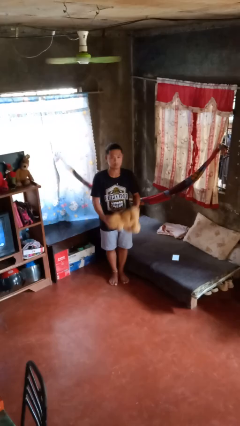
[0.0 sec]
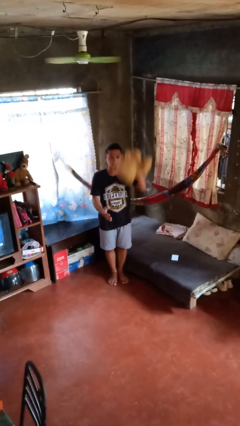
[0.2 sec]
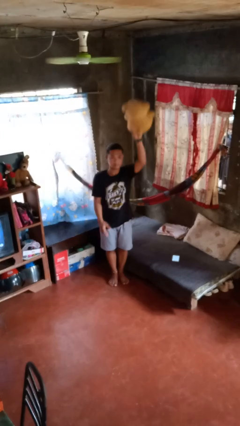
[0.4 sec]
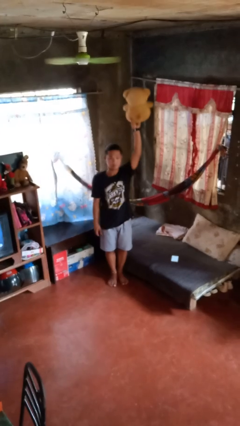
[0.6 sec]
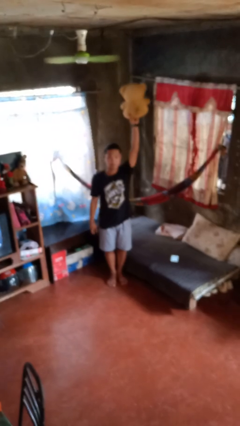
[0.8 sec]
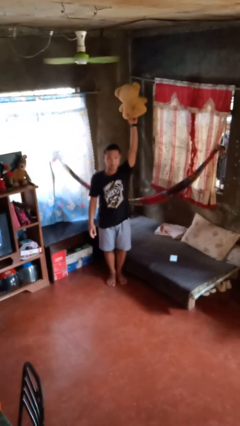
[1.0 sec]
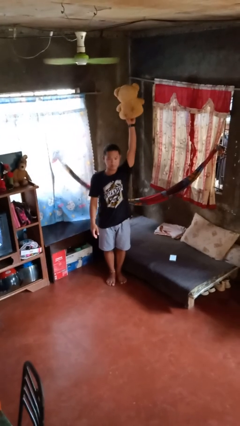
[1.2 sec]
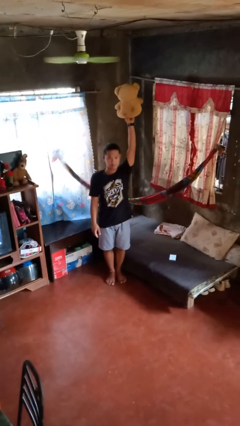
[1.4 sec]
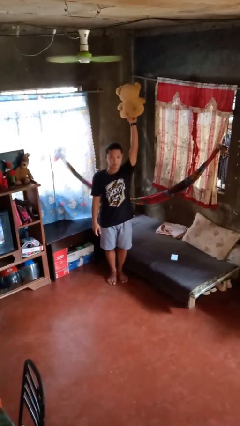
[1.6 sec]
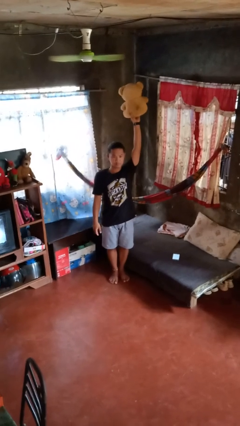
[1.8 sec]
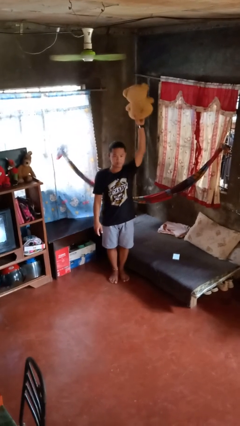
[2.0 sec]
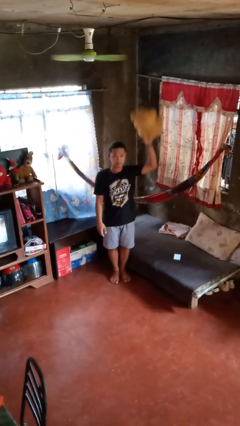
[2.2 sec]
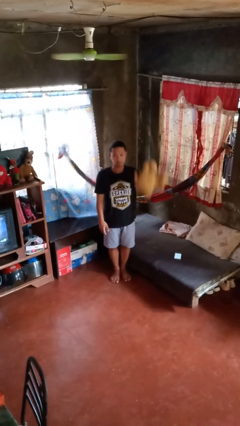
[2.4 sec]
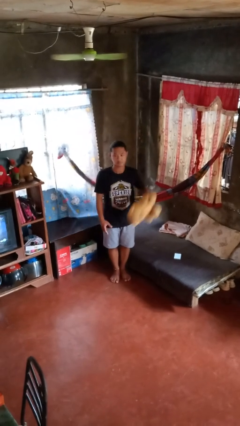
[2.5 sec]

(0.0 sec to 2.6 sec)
person holds object above head

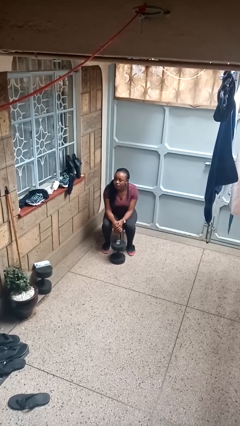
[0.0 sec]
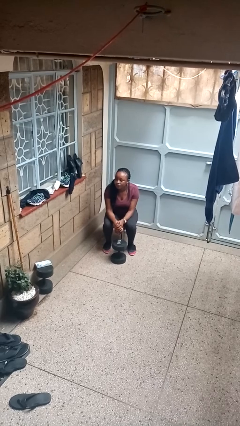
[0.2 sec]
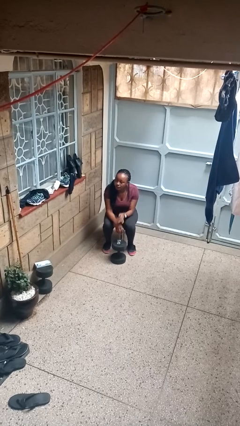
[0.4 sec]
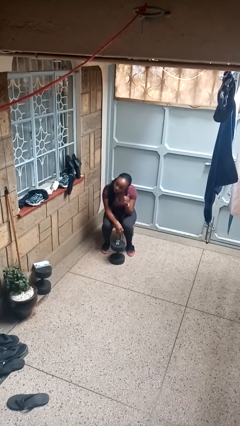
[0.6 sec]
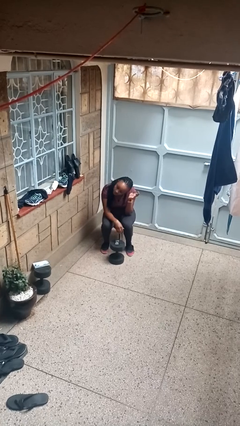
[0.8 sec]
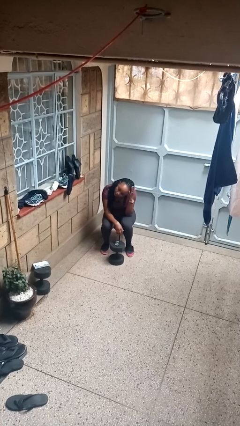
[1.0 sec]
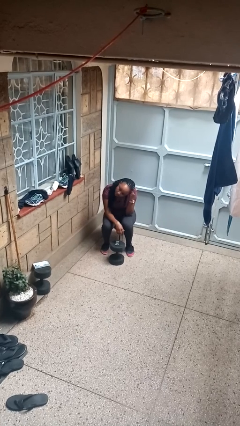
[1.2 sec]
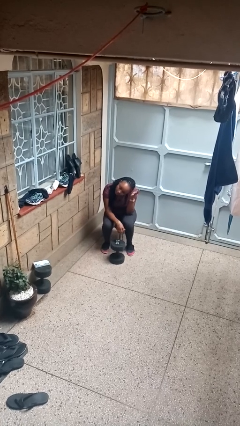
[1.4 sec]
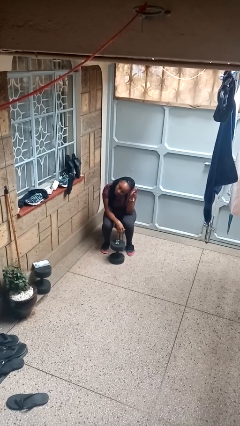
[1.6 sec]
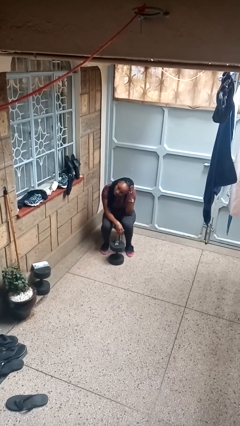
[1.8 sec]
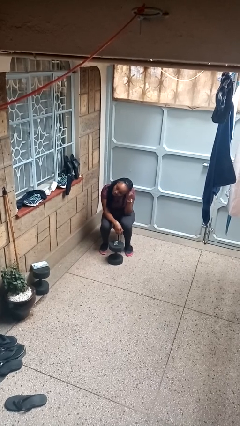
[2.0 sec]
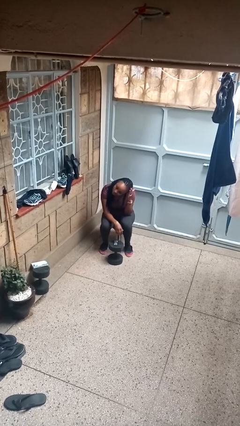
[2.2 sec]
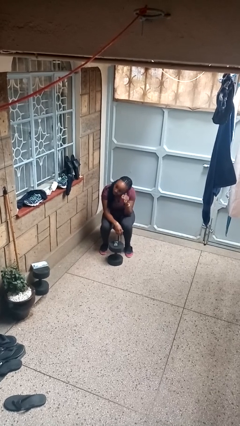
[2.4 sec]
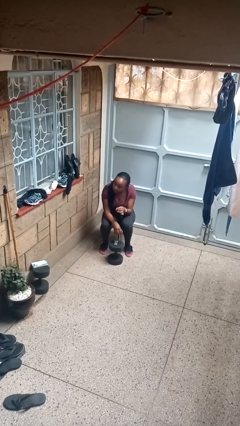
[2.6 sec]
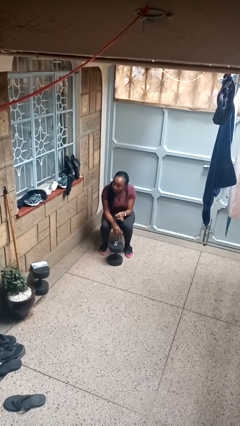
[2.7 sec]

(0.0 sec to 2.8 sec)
person pats head

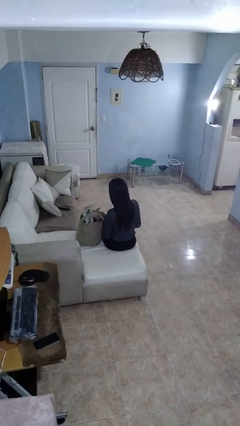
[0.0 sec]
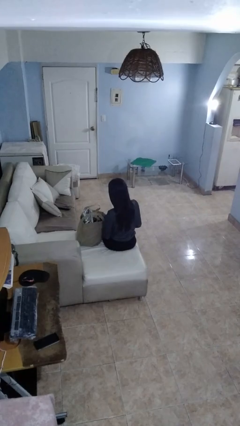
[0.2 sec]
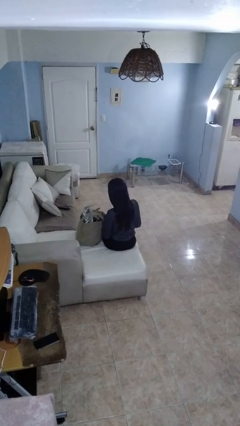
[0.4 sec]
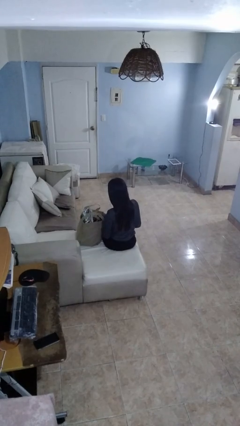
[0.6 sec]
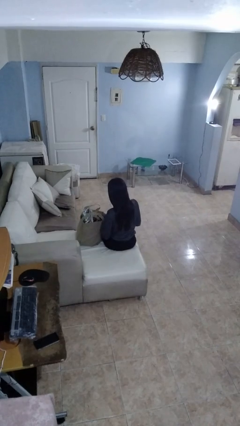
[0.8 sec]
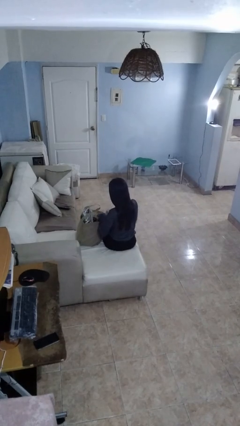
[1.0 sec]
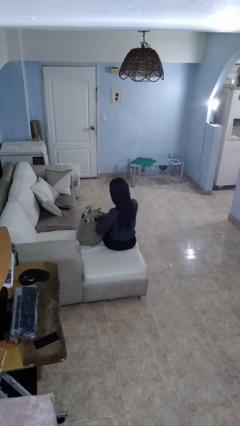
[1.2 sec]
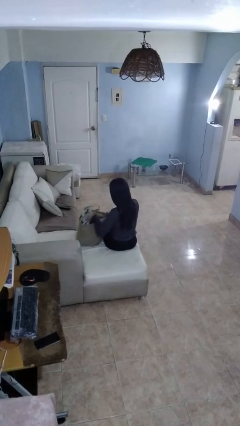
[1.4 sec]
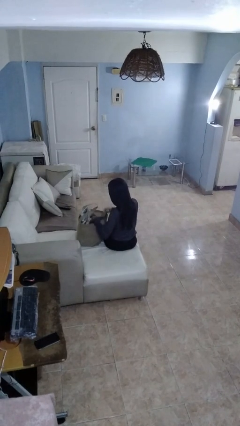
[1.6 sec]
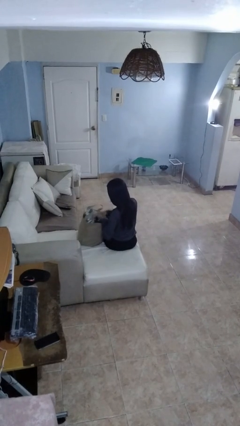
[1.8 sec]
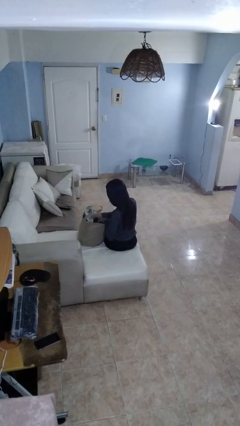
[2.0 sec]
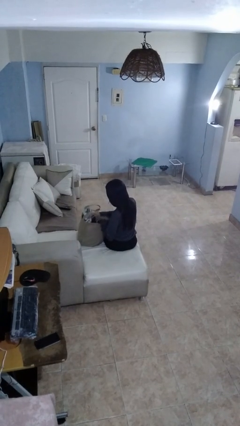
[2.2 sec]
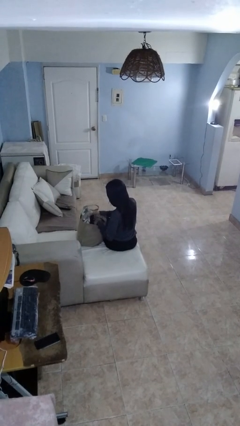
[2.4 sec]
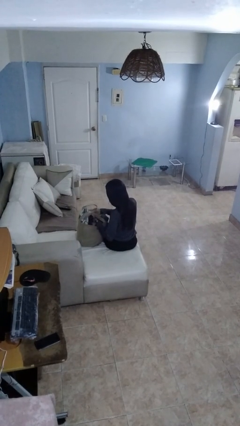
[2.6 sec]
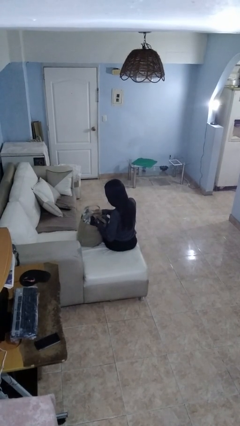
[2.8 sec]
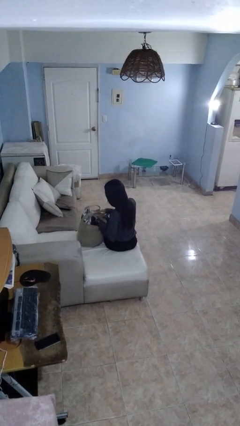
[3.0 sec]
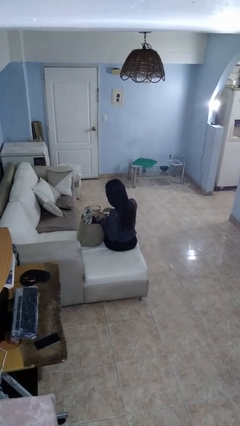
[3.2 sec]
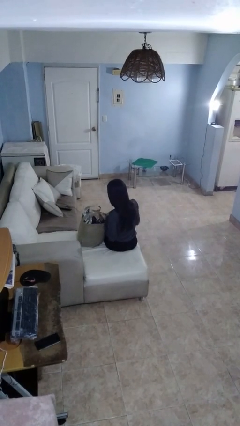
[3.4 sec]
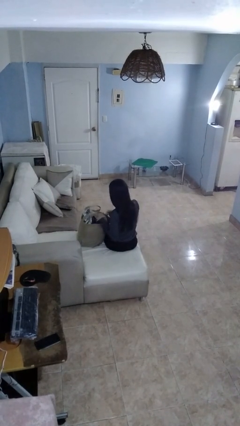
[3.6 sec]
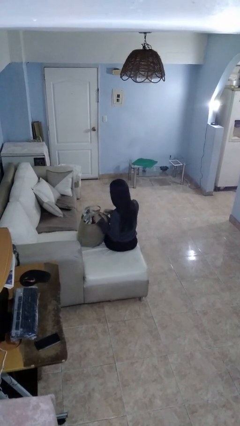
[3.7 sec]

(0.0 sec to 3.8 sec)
person searches in bag

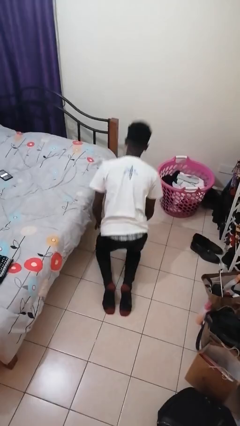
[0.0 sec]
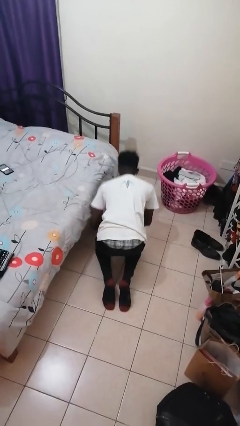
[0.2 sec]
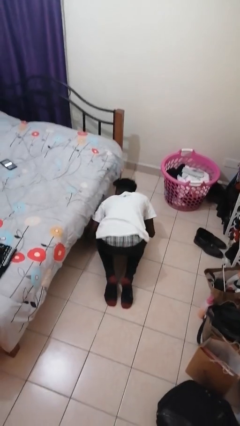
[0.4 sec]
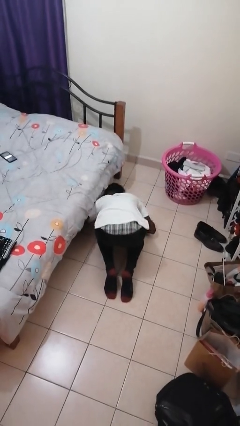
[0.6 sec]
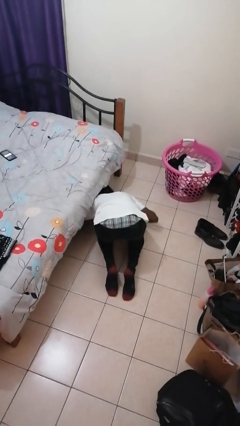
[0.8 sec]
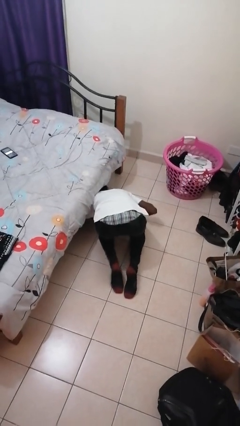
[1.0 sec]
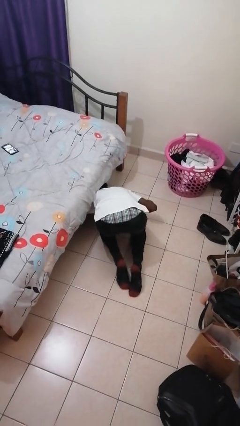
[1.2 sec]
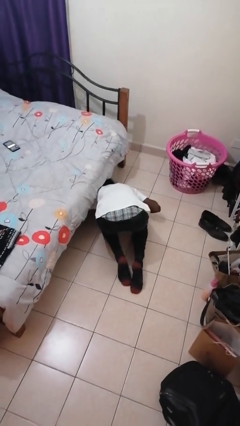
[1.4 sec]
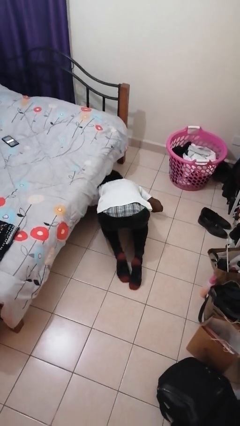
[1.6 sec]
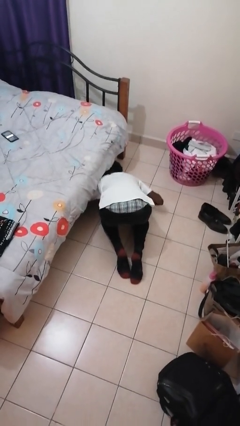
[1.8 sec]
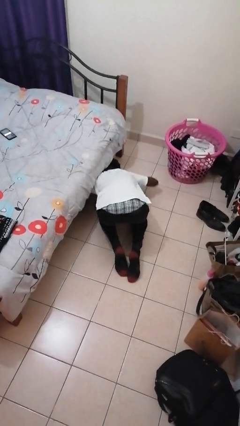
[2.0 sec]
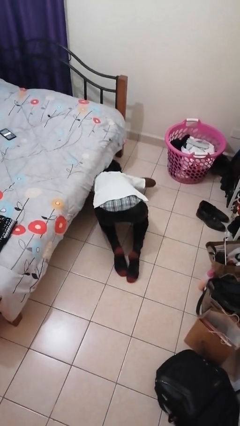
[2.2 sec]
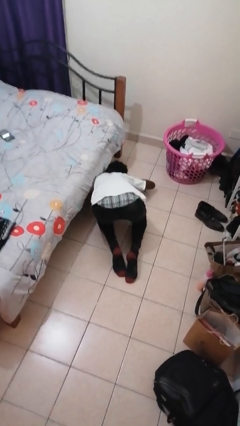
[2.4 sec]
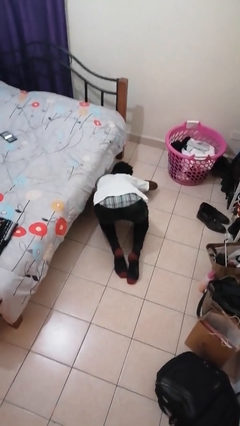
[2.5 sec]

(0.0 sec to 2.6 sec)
person searches under bed

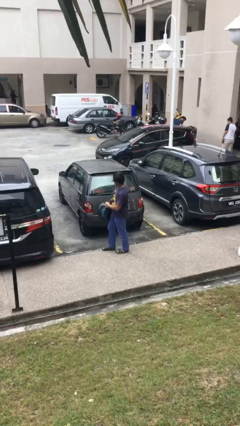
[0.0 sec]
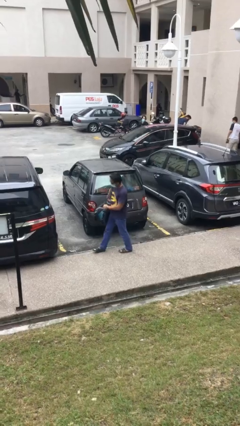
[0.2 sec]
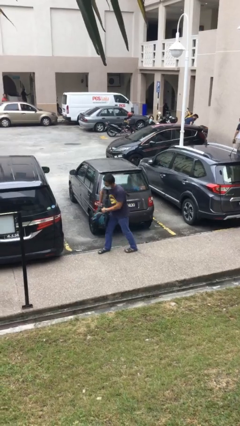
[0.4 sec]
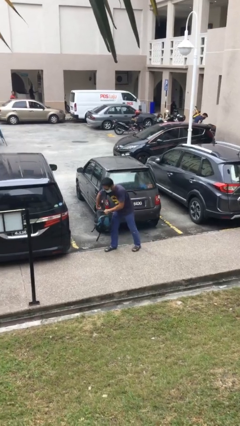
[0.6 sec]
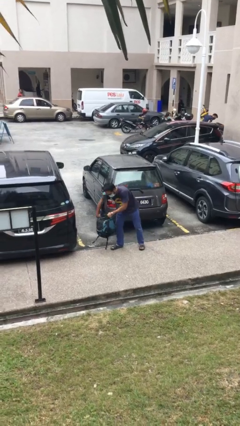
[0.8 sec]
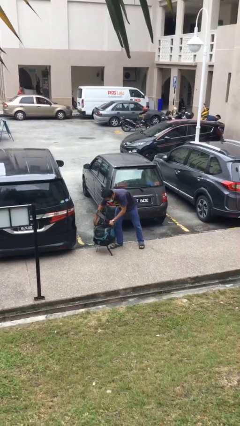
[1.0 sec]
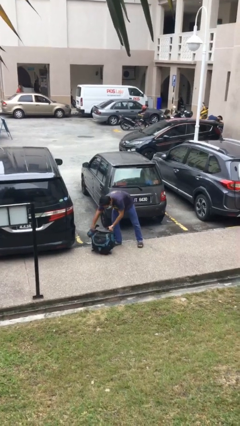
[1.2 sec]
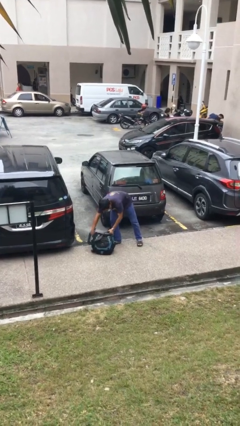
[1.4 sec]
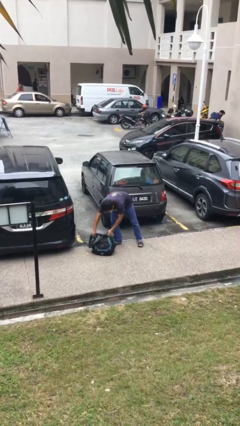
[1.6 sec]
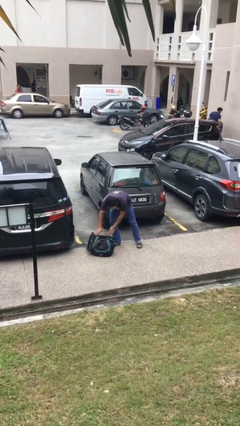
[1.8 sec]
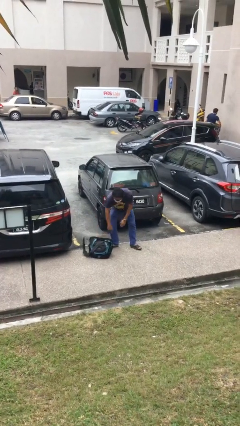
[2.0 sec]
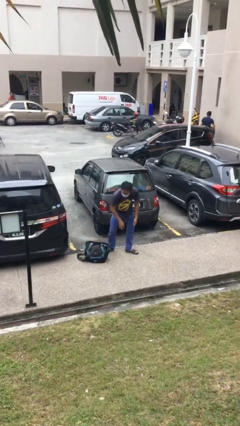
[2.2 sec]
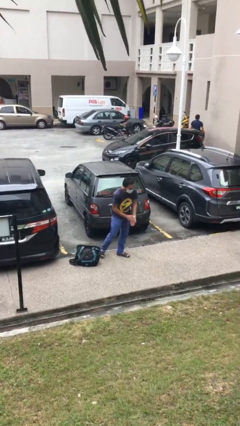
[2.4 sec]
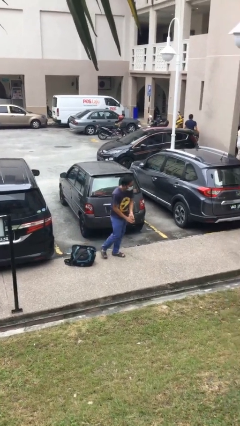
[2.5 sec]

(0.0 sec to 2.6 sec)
person puts down object on floor

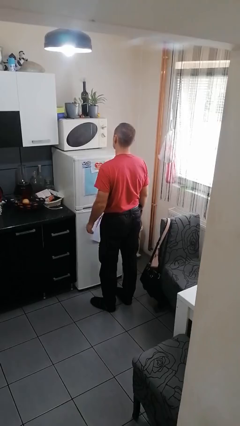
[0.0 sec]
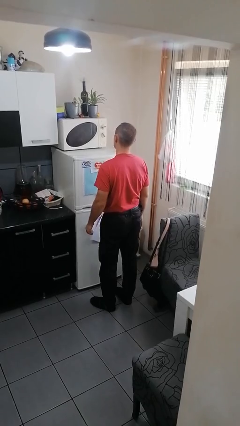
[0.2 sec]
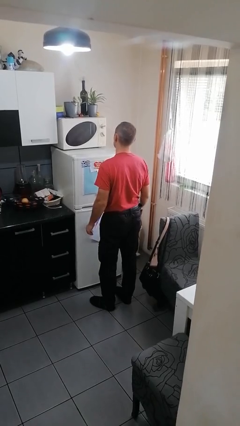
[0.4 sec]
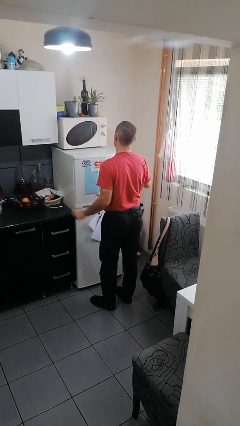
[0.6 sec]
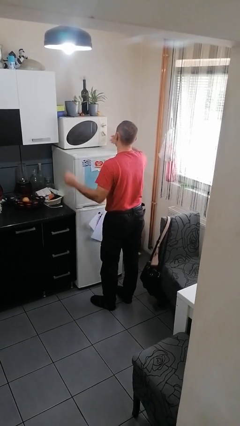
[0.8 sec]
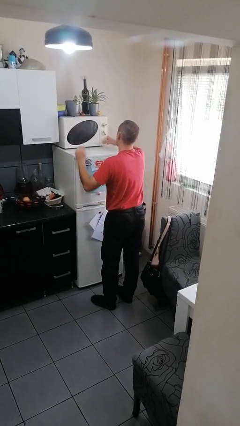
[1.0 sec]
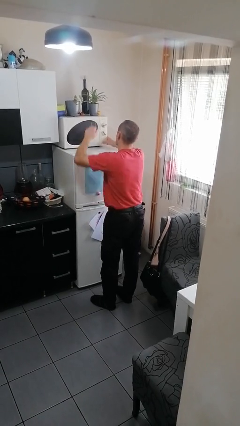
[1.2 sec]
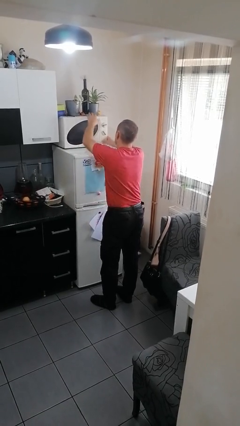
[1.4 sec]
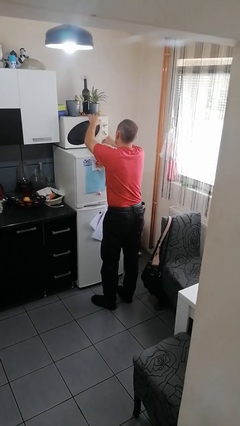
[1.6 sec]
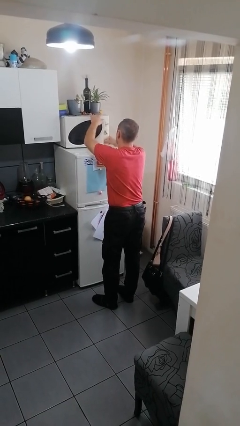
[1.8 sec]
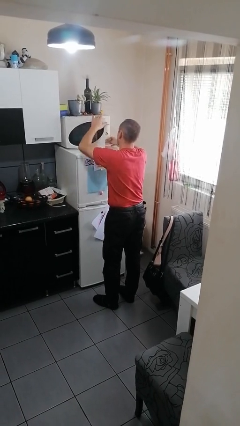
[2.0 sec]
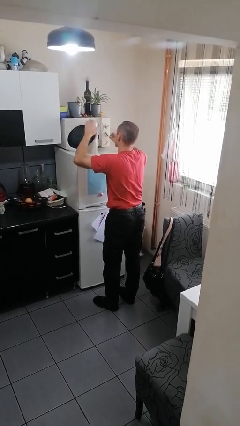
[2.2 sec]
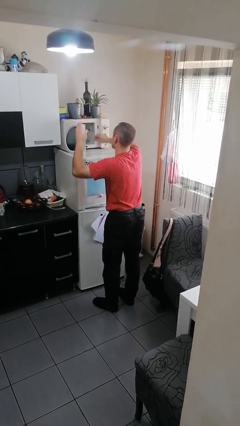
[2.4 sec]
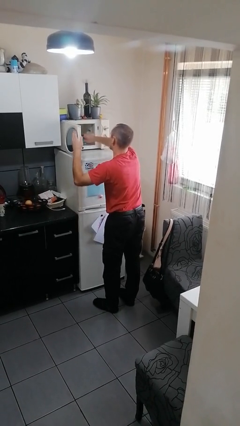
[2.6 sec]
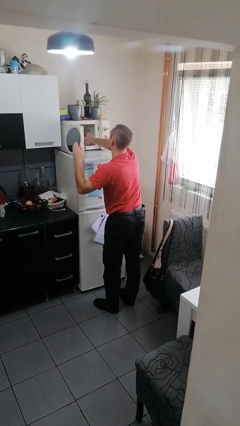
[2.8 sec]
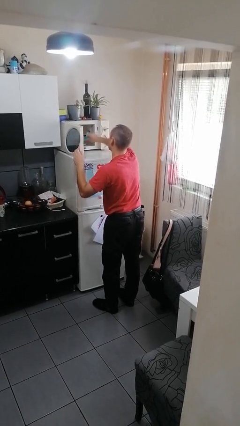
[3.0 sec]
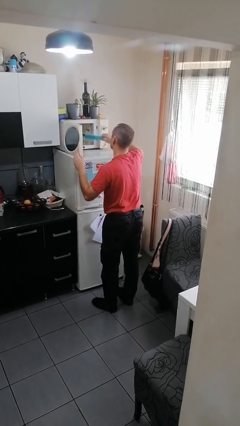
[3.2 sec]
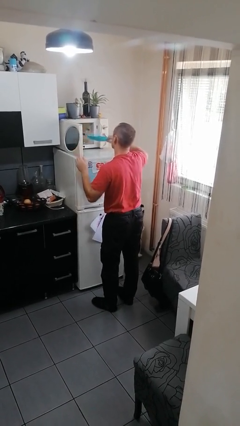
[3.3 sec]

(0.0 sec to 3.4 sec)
person takes object from microwave
